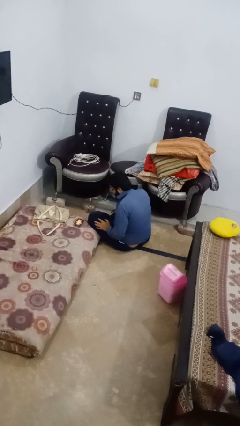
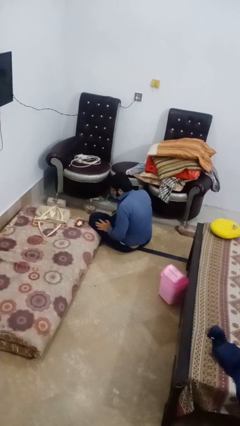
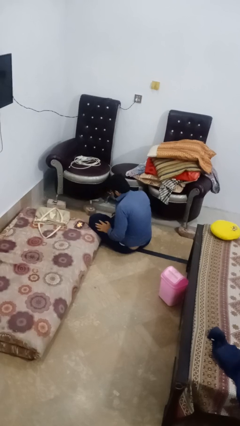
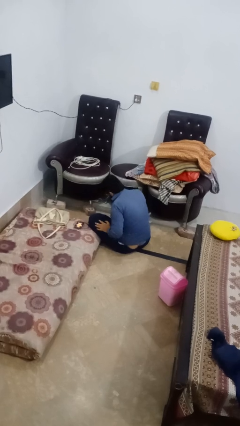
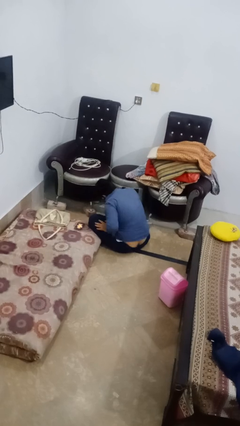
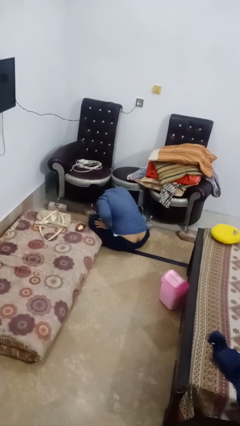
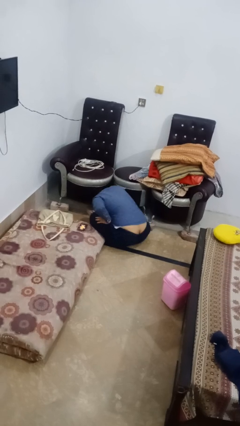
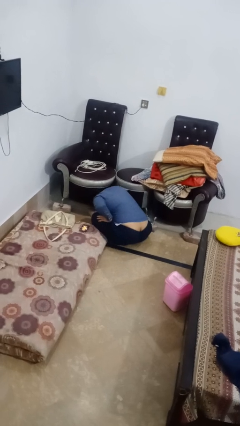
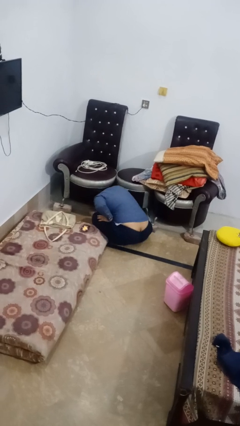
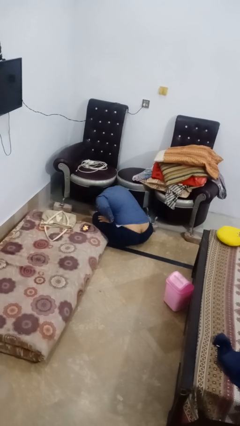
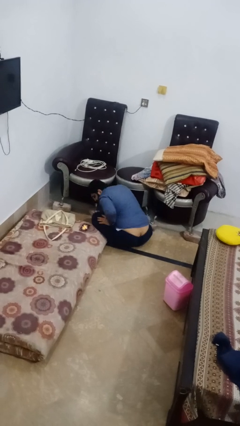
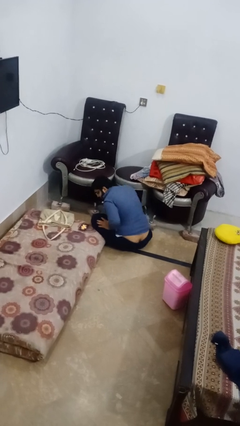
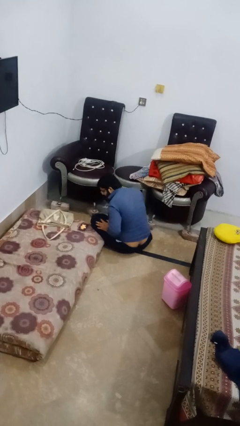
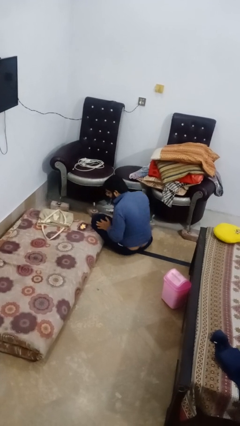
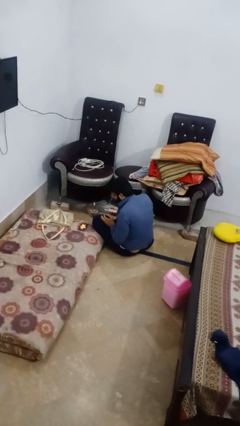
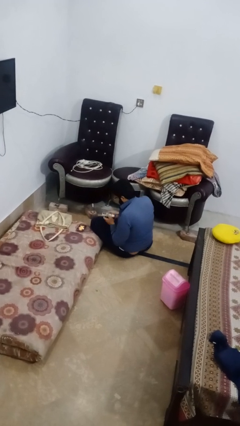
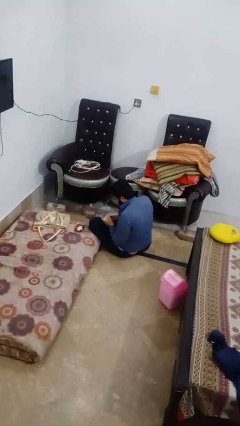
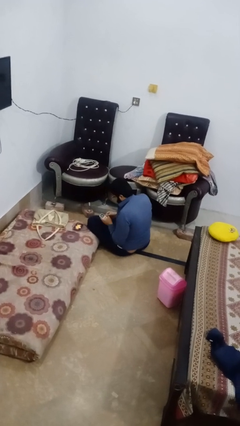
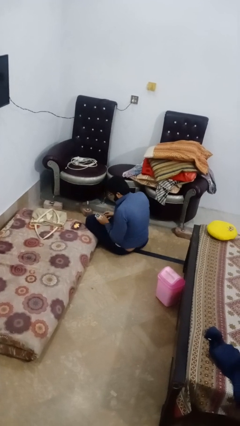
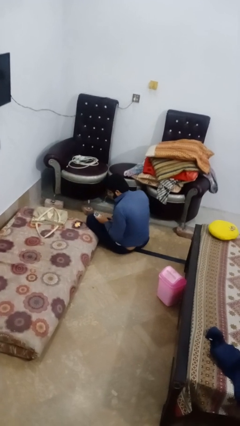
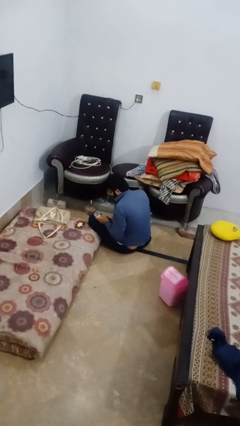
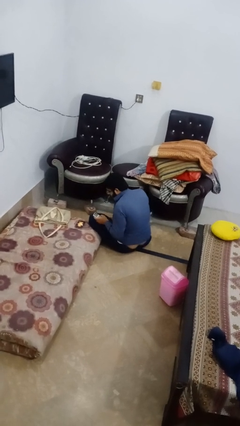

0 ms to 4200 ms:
person searches under couch

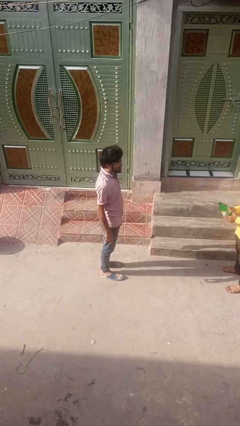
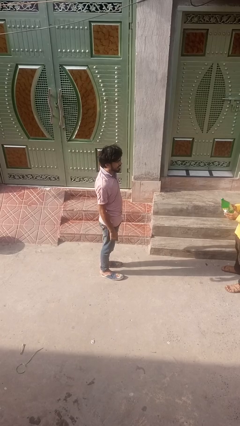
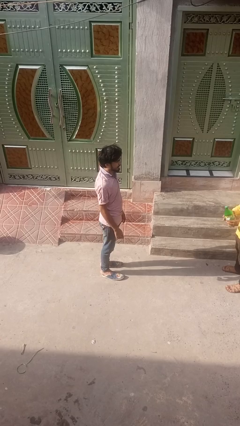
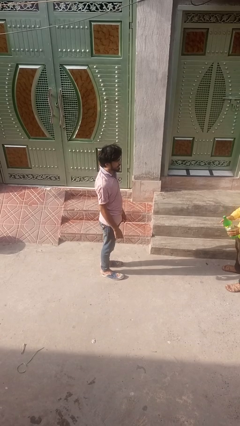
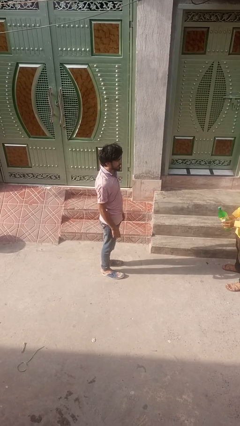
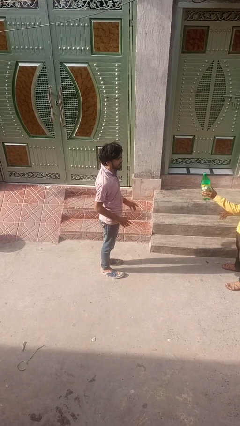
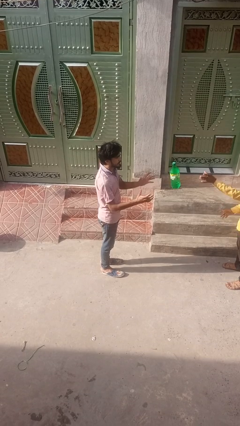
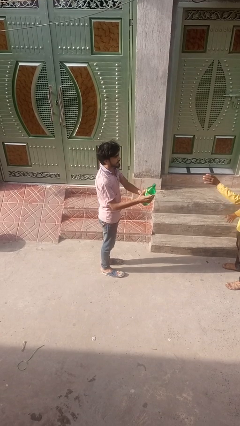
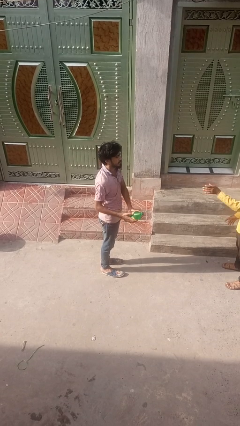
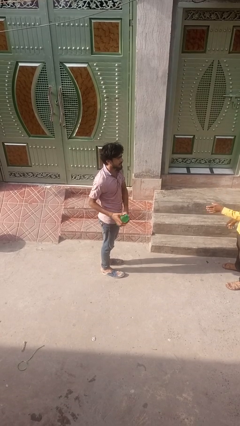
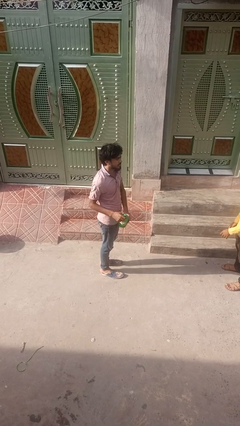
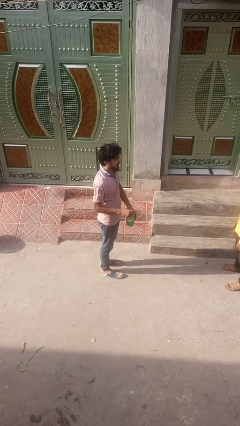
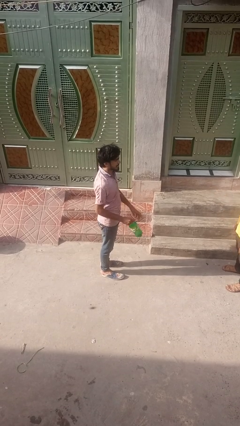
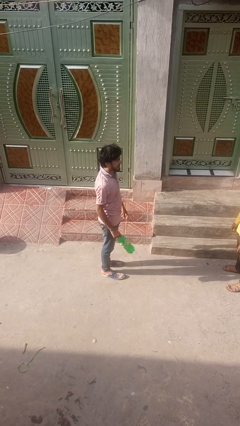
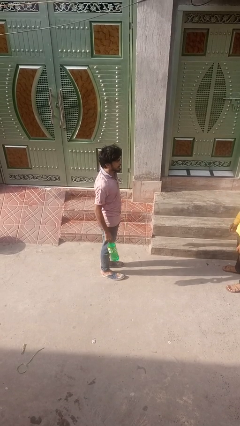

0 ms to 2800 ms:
person catches object from person

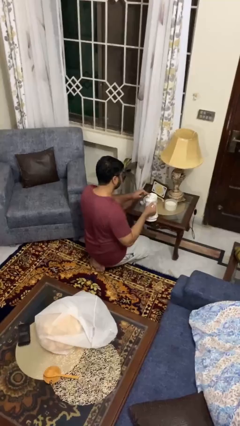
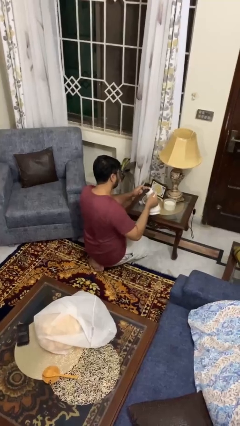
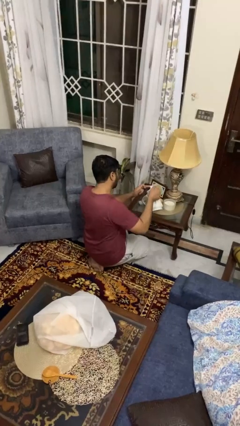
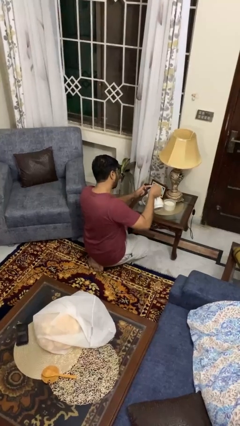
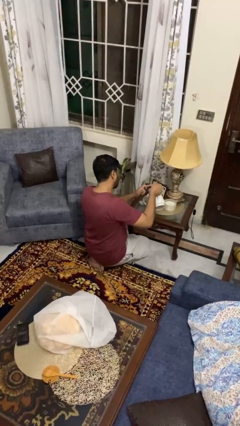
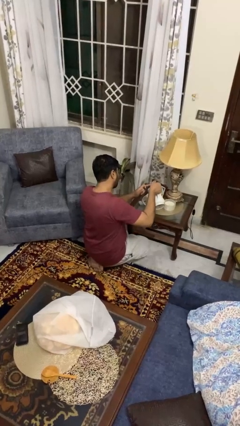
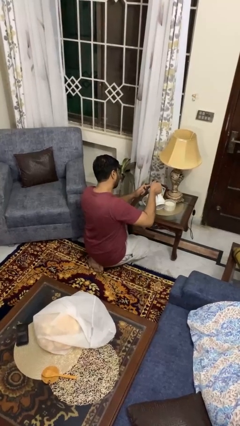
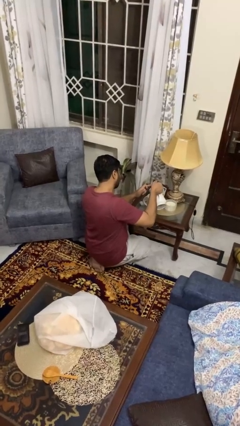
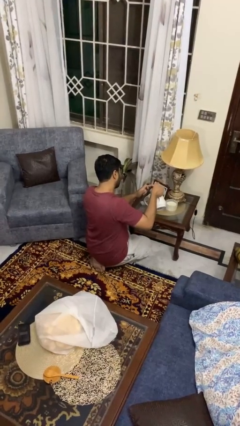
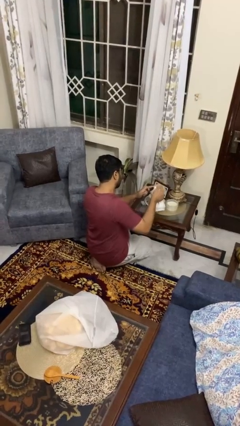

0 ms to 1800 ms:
person pours coffee into mug

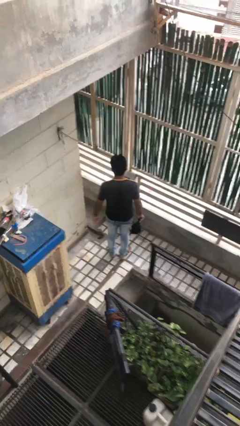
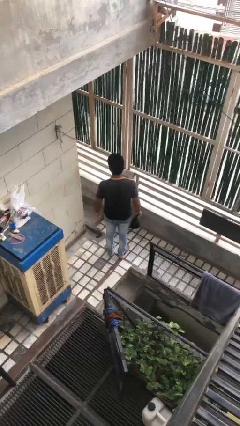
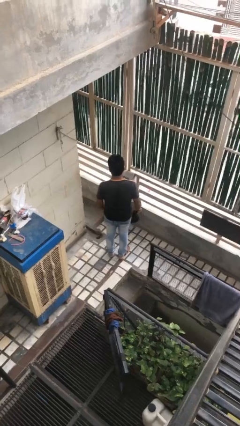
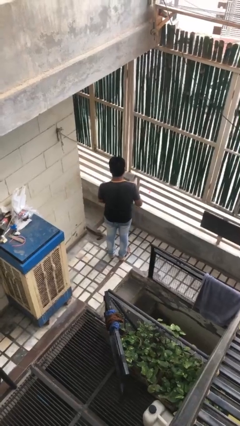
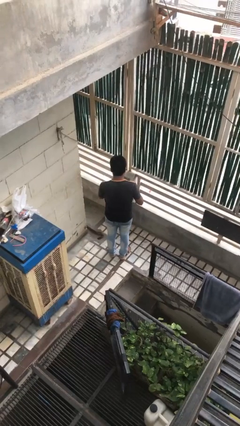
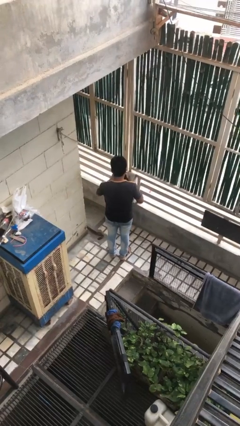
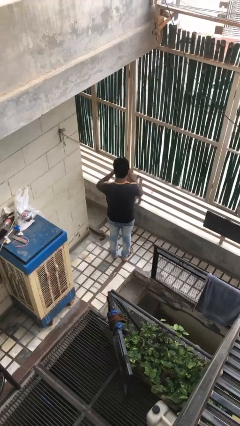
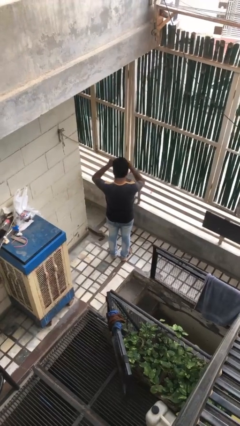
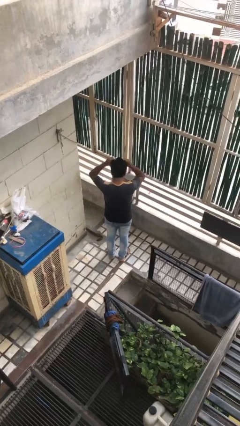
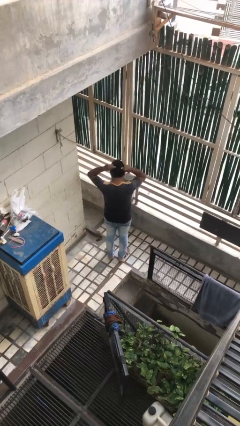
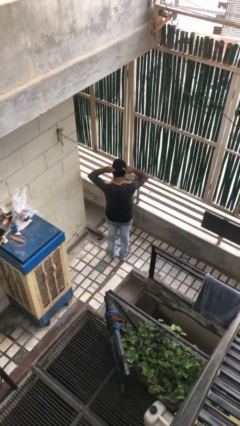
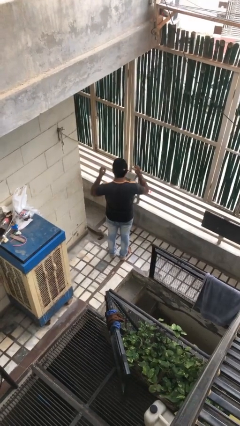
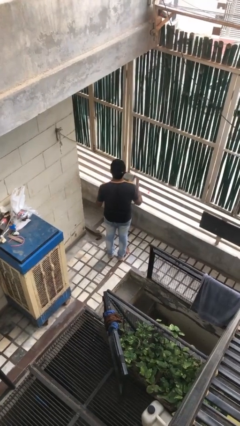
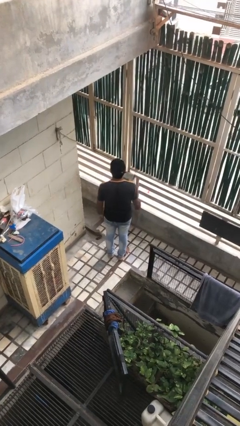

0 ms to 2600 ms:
person puts on hat

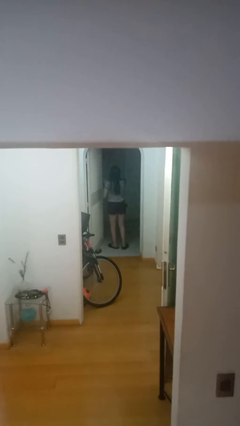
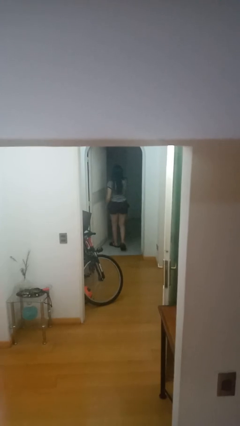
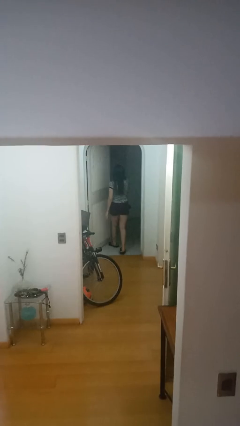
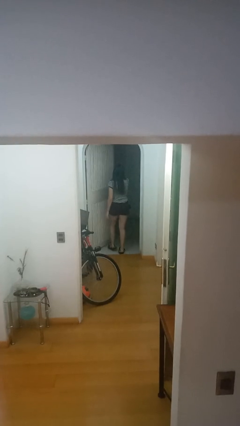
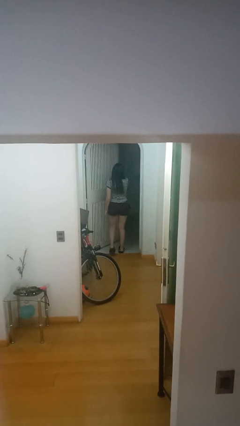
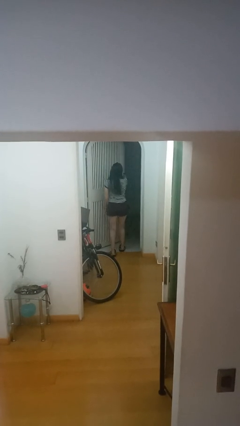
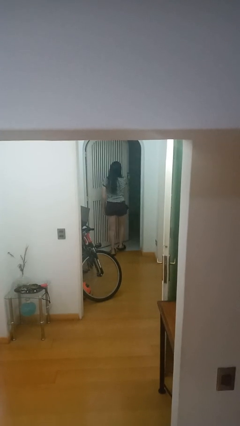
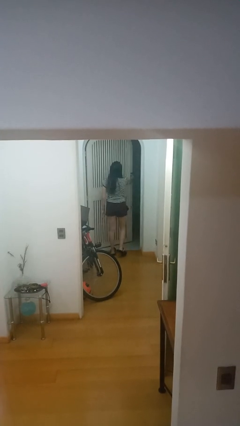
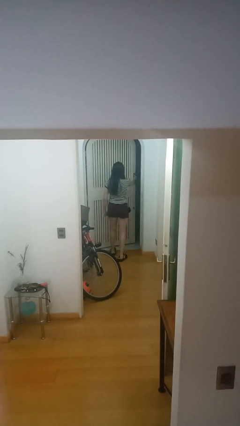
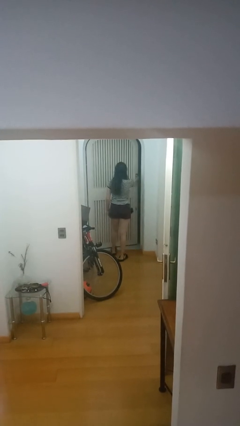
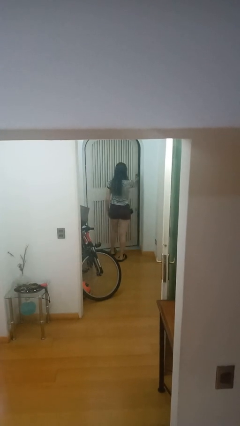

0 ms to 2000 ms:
person closes facility door

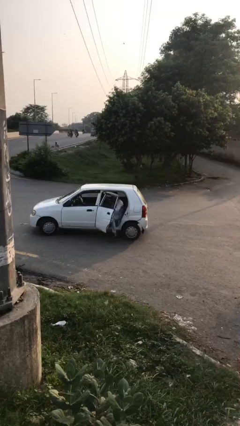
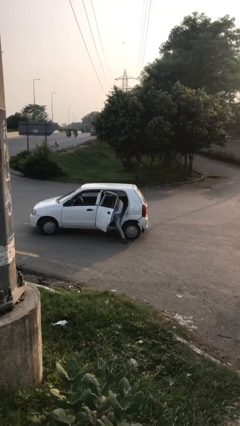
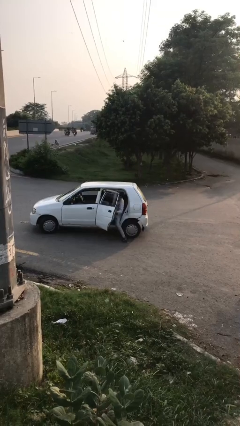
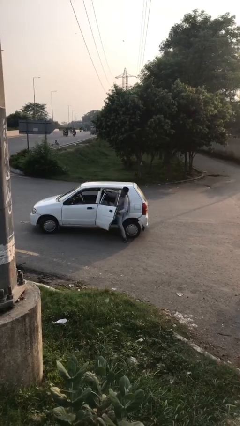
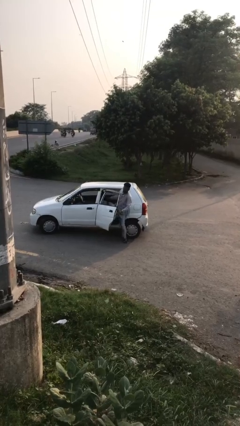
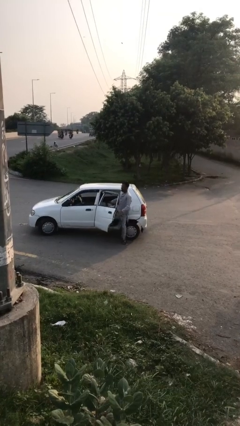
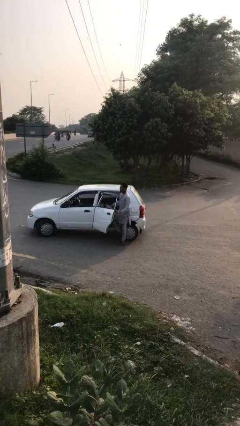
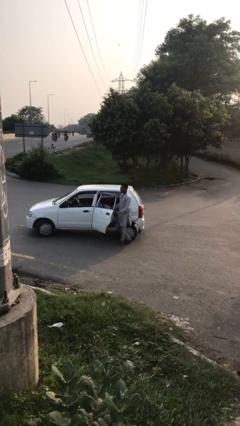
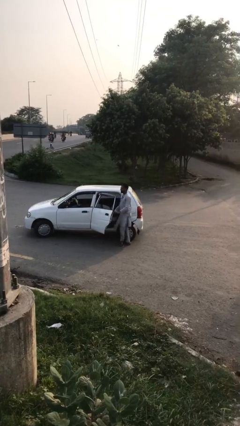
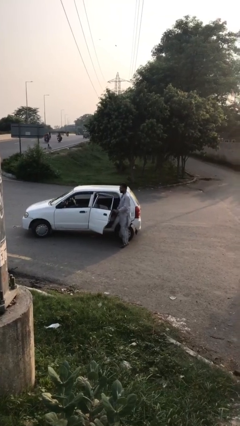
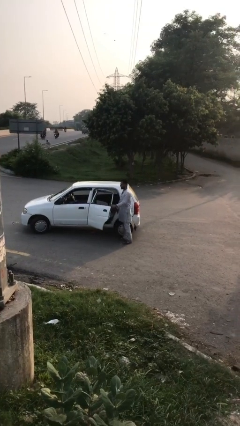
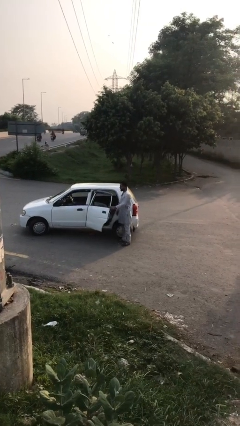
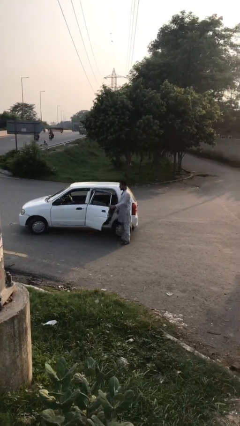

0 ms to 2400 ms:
person exits car

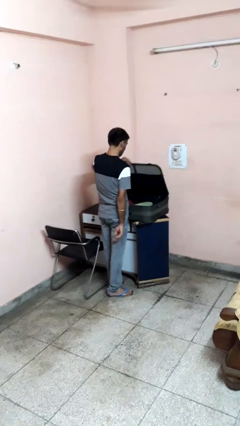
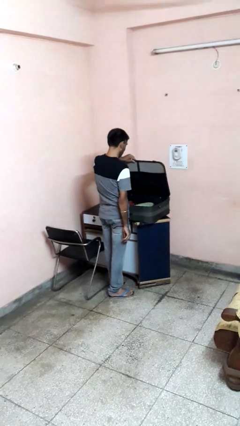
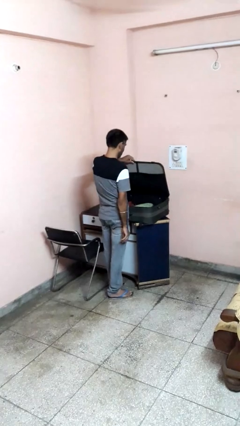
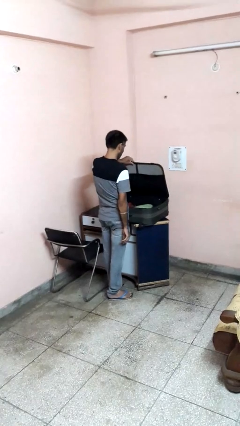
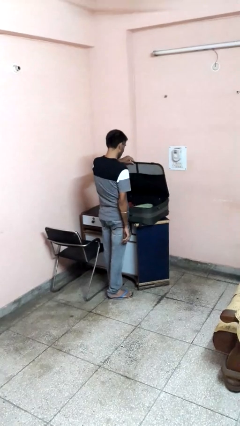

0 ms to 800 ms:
person opens suitcase

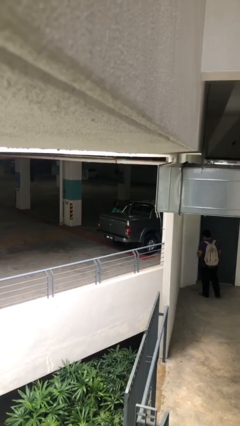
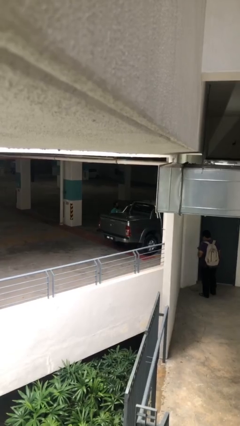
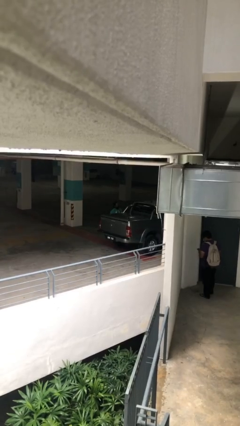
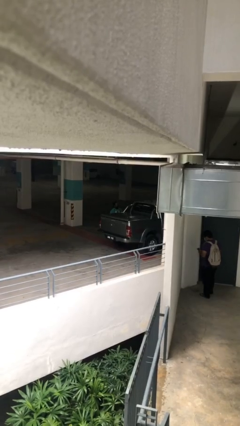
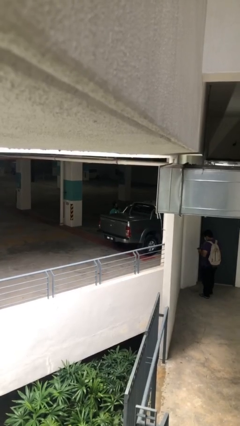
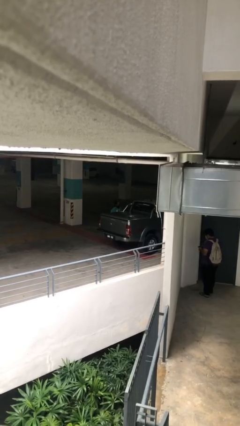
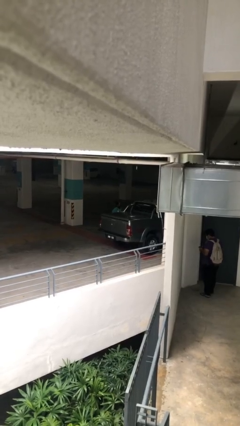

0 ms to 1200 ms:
person closes car door
